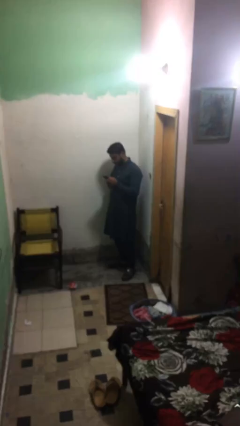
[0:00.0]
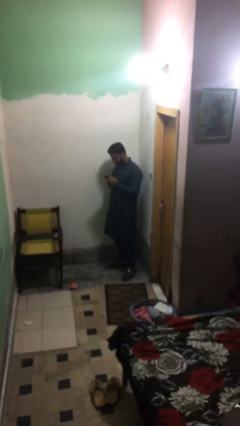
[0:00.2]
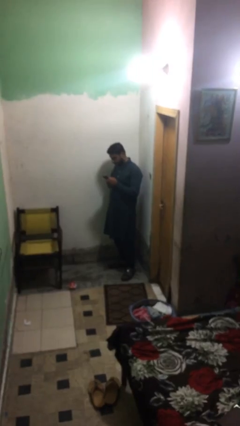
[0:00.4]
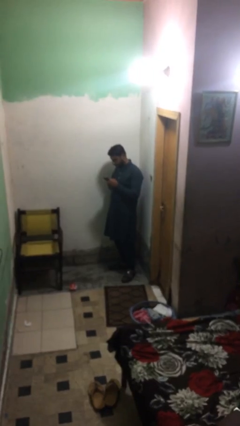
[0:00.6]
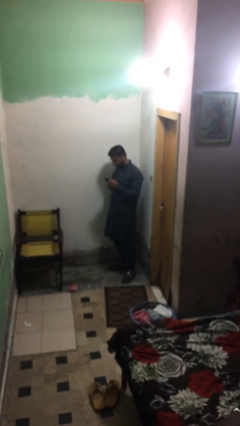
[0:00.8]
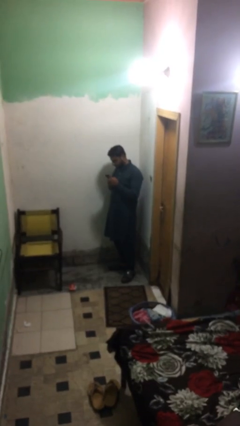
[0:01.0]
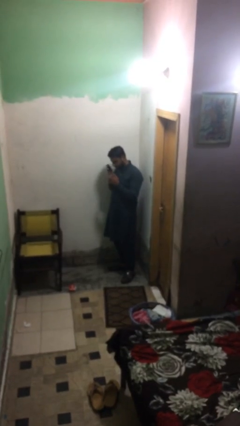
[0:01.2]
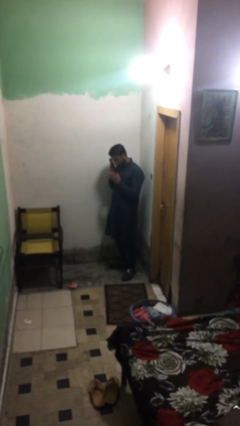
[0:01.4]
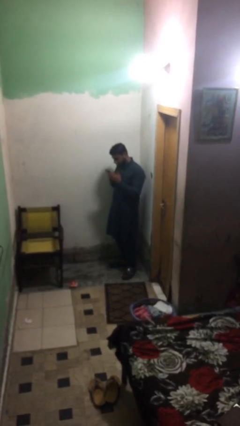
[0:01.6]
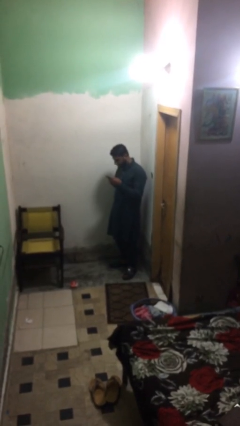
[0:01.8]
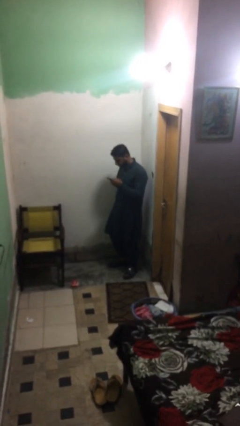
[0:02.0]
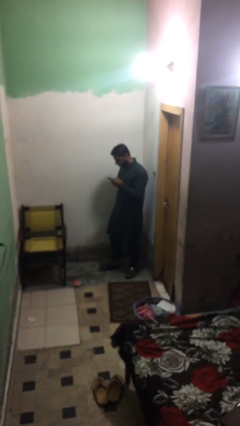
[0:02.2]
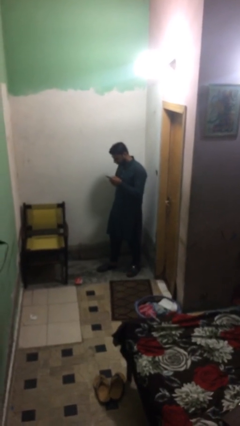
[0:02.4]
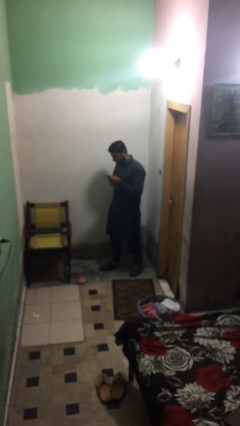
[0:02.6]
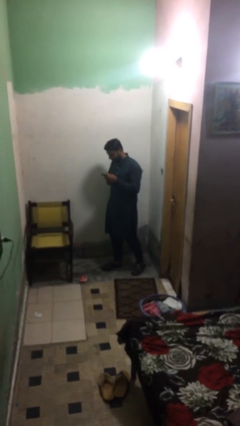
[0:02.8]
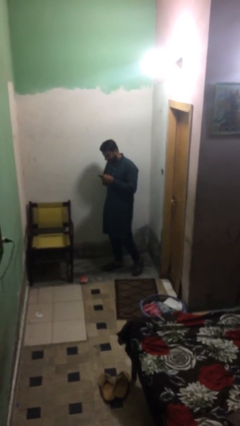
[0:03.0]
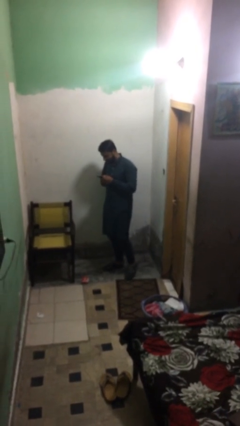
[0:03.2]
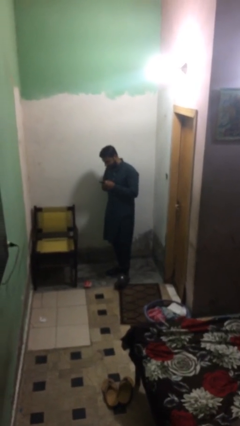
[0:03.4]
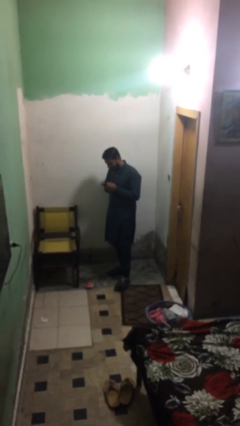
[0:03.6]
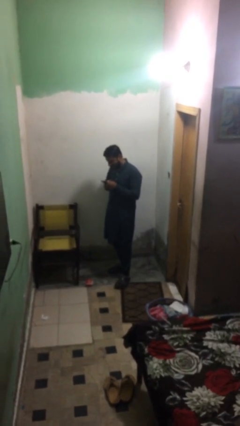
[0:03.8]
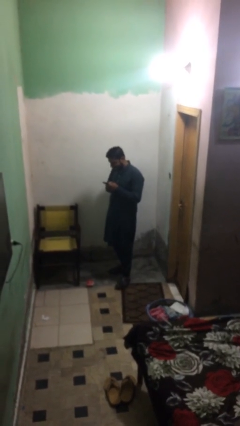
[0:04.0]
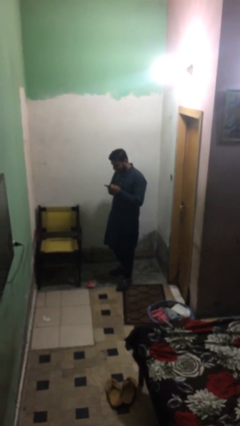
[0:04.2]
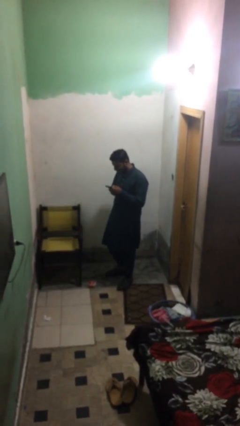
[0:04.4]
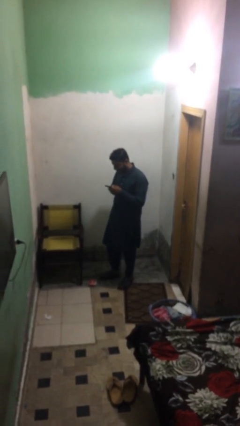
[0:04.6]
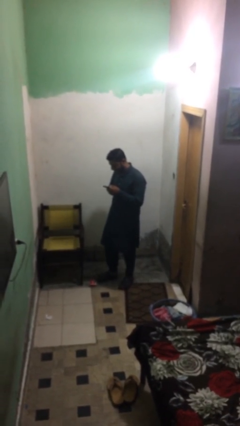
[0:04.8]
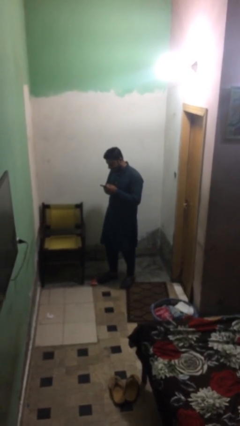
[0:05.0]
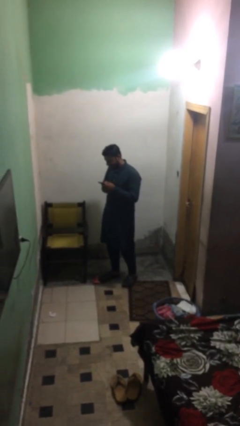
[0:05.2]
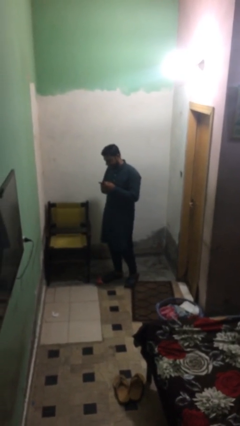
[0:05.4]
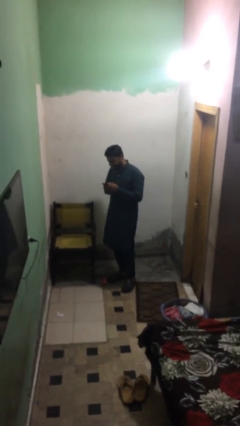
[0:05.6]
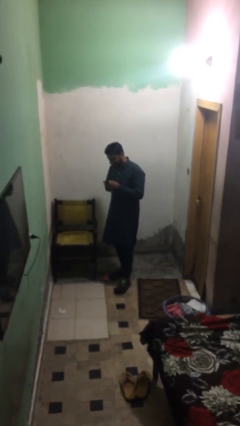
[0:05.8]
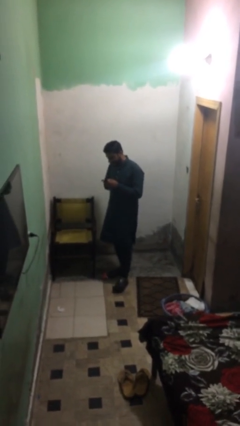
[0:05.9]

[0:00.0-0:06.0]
person texts on phone

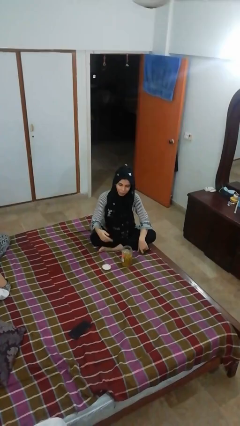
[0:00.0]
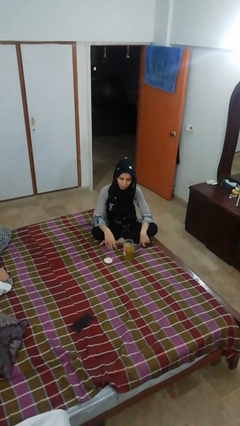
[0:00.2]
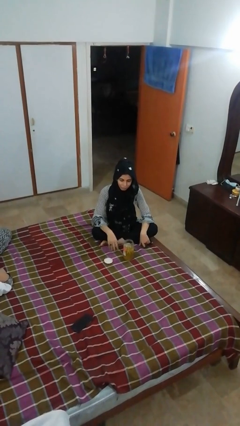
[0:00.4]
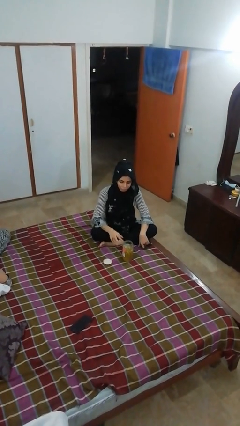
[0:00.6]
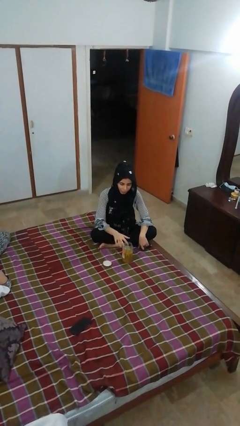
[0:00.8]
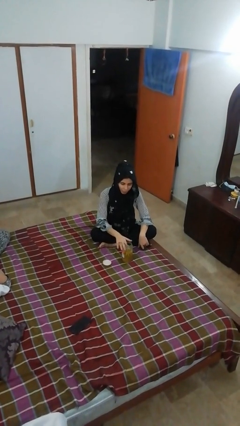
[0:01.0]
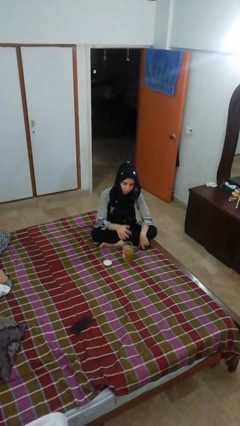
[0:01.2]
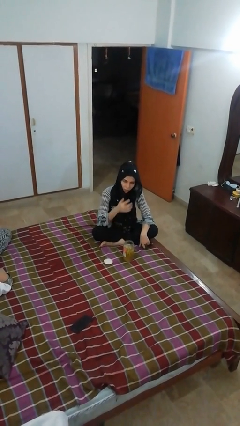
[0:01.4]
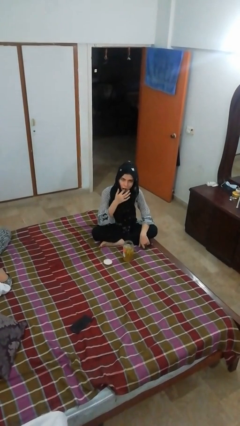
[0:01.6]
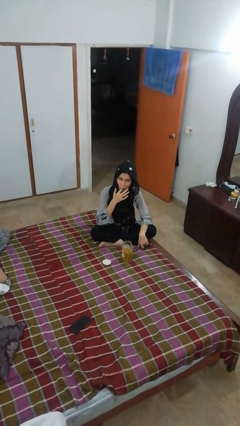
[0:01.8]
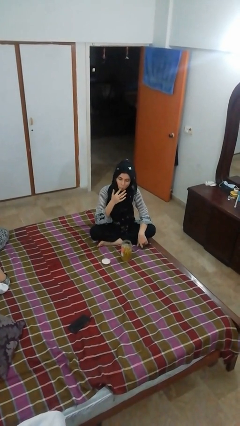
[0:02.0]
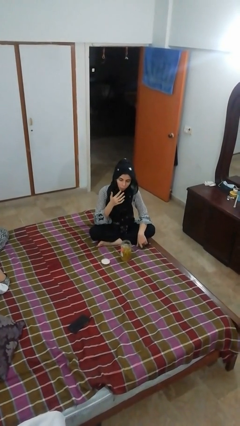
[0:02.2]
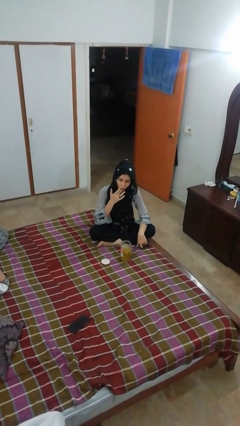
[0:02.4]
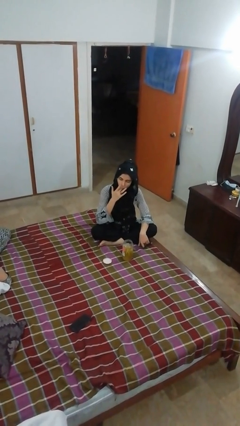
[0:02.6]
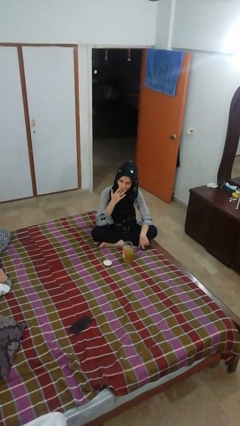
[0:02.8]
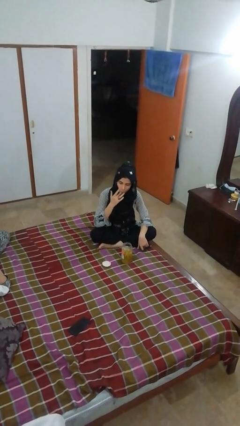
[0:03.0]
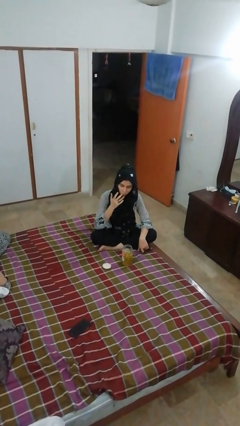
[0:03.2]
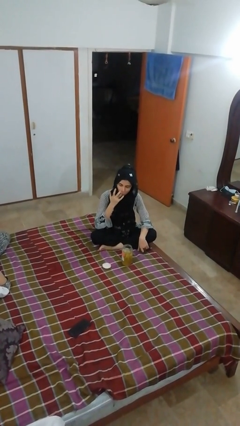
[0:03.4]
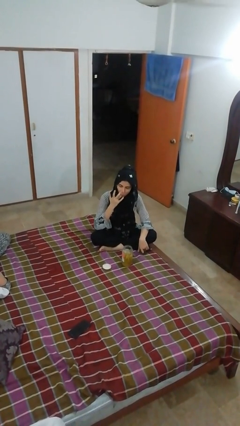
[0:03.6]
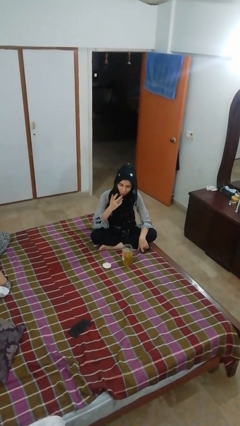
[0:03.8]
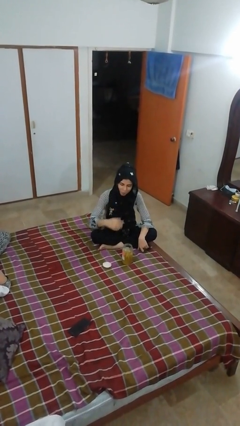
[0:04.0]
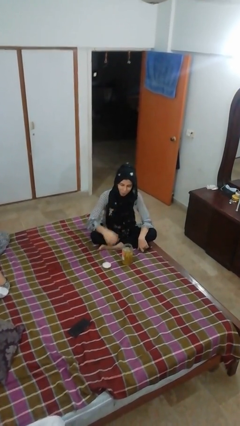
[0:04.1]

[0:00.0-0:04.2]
person licks fingers

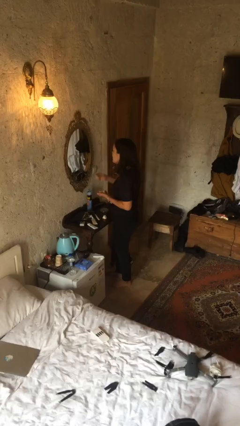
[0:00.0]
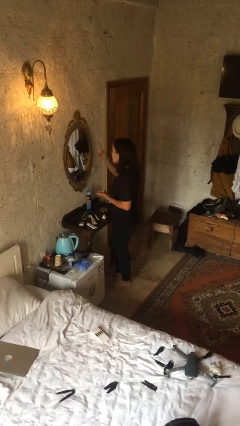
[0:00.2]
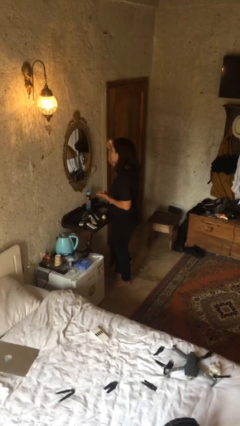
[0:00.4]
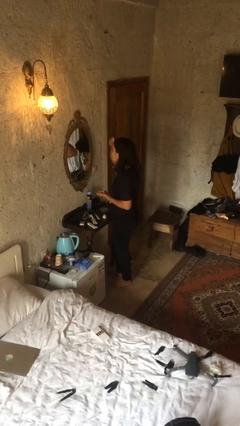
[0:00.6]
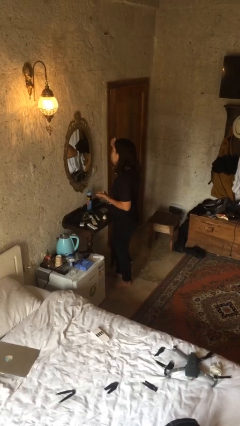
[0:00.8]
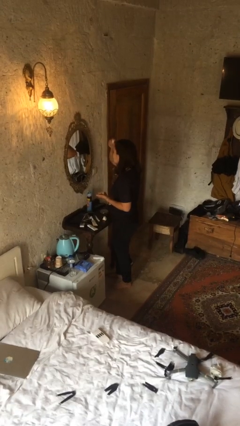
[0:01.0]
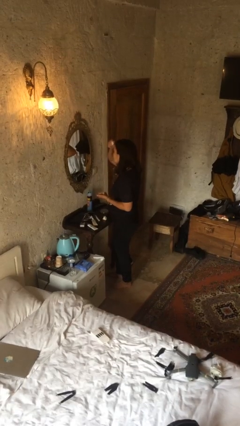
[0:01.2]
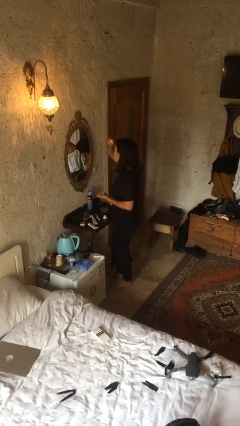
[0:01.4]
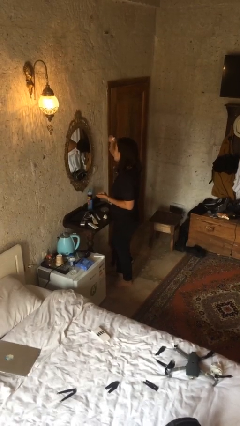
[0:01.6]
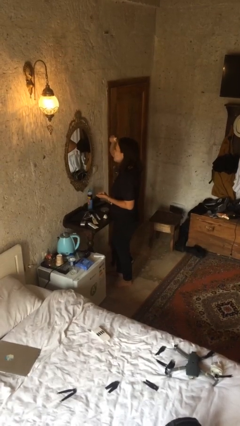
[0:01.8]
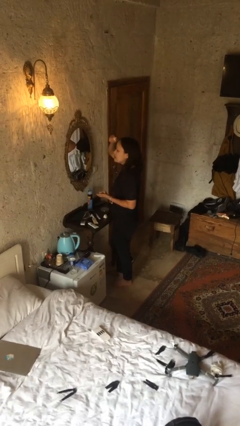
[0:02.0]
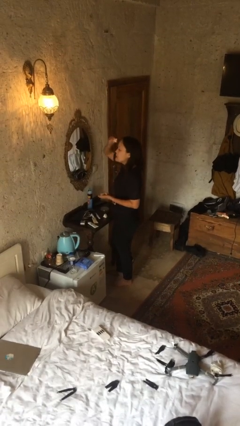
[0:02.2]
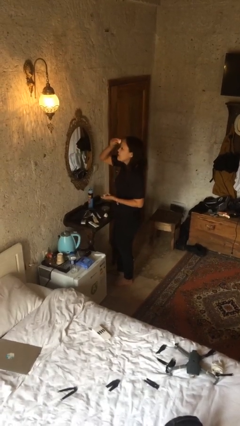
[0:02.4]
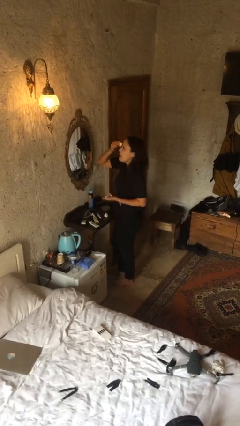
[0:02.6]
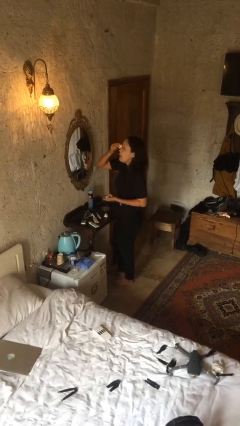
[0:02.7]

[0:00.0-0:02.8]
person applies foundation makeup

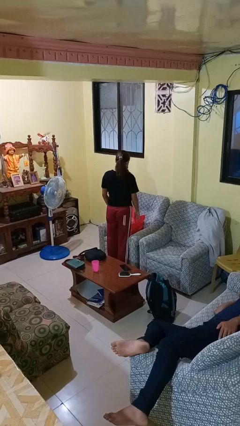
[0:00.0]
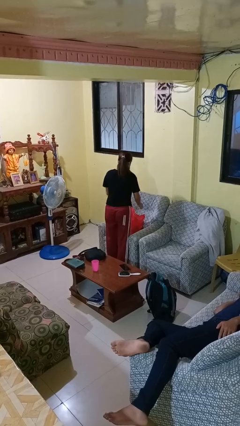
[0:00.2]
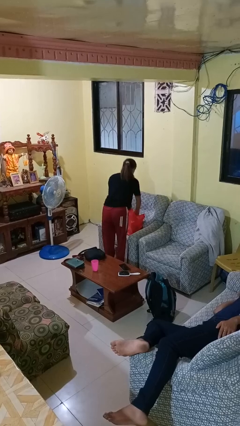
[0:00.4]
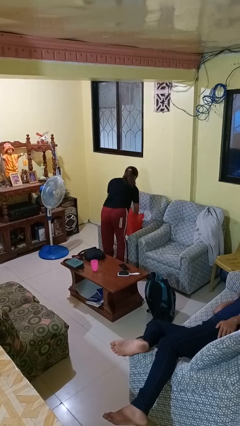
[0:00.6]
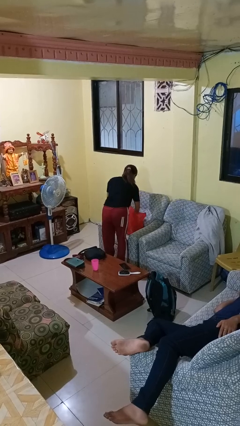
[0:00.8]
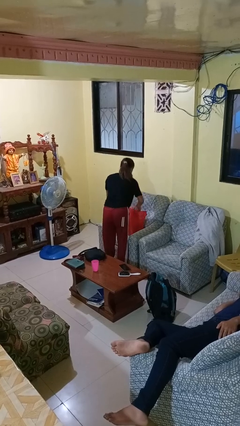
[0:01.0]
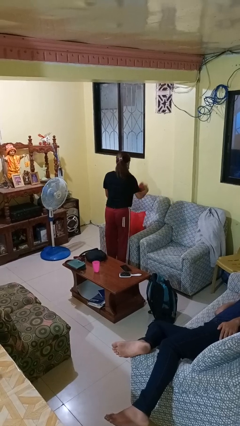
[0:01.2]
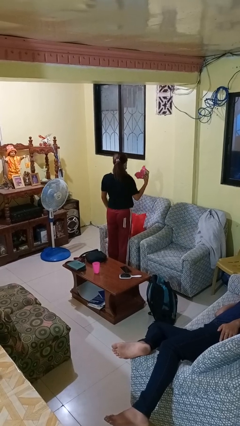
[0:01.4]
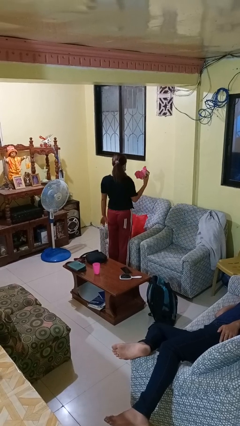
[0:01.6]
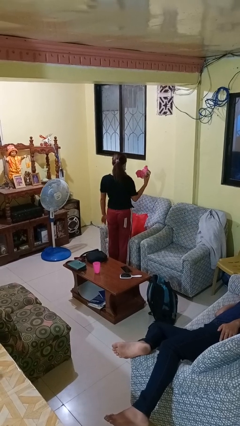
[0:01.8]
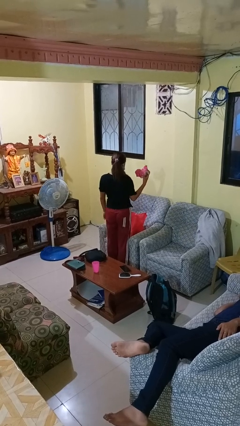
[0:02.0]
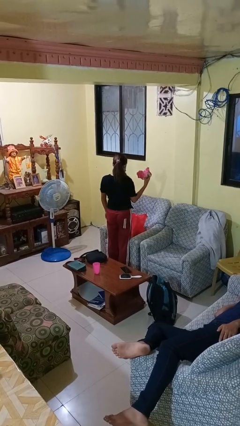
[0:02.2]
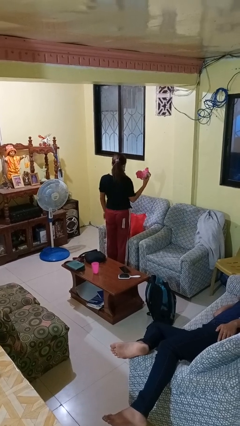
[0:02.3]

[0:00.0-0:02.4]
person takes object from bag

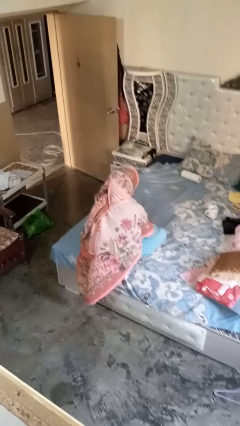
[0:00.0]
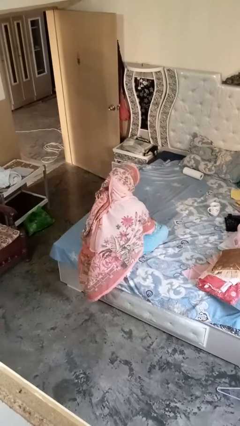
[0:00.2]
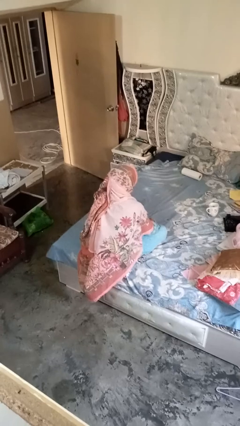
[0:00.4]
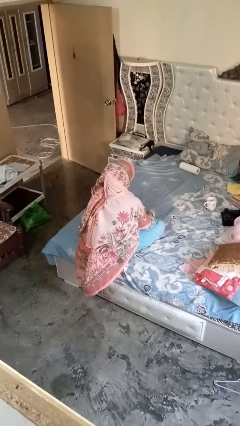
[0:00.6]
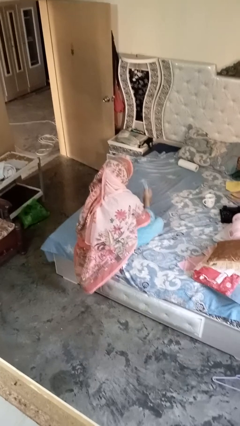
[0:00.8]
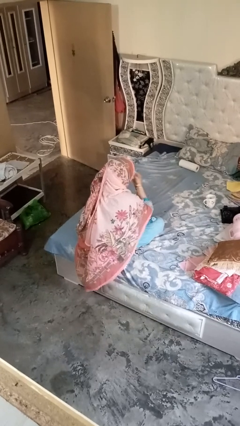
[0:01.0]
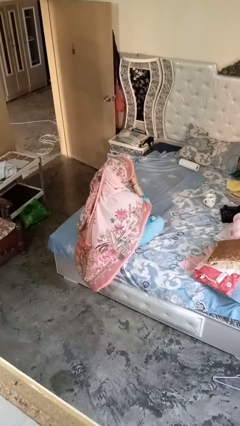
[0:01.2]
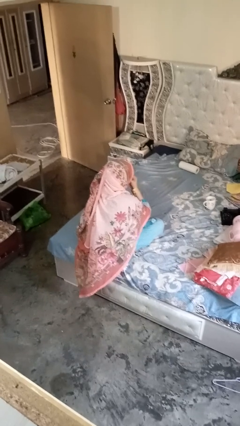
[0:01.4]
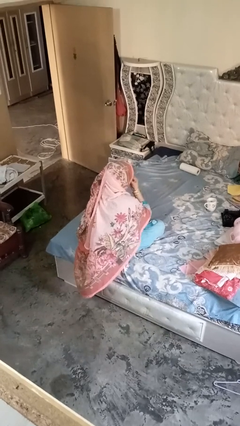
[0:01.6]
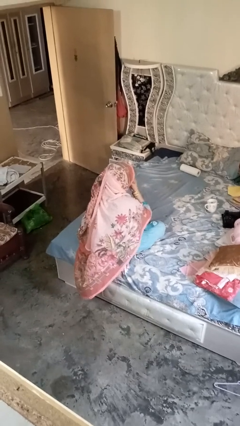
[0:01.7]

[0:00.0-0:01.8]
person blows nose

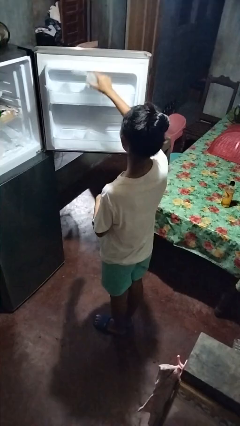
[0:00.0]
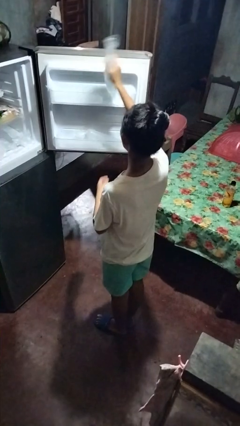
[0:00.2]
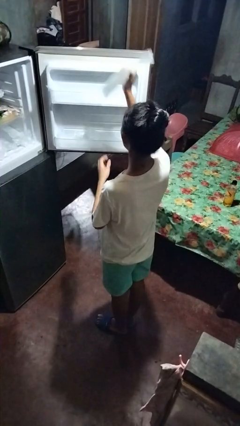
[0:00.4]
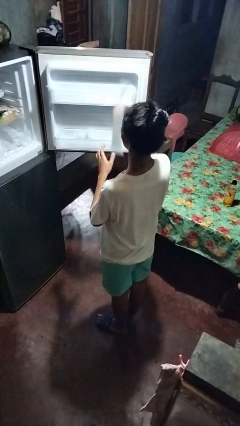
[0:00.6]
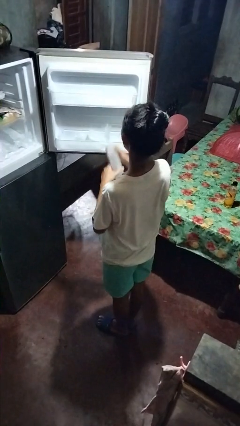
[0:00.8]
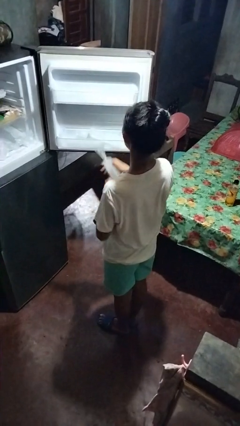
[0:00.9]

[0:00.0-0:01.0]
person takes object from refrigerator
